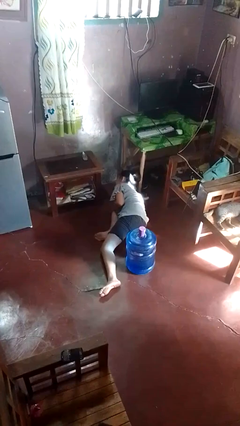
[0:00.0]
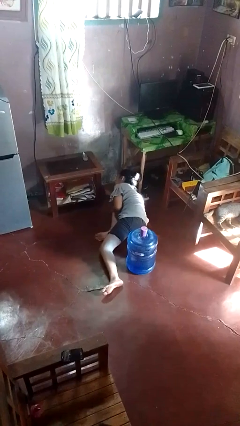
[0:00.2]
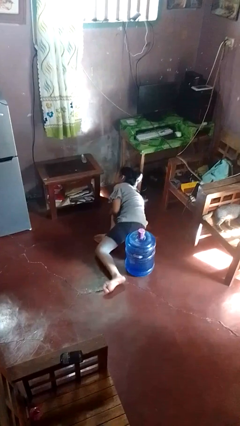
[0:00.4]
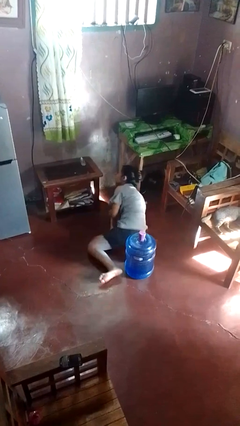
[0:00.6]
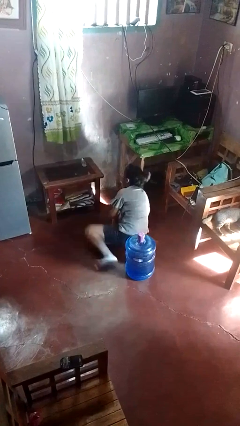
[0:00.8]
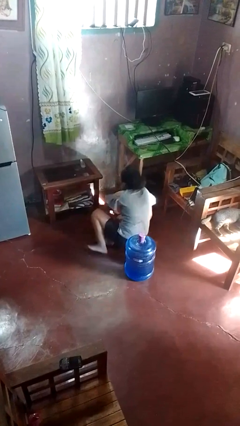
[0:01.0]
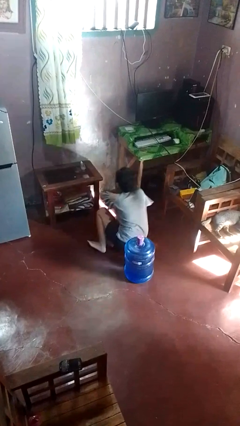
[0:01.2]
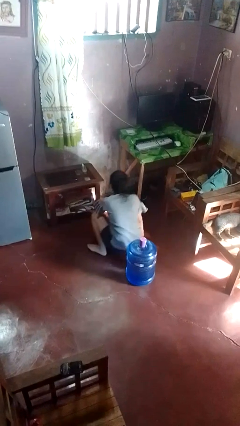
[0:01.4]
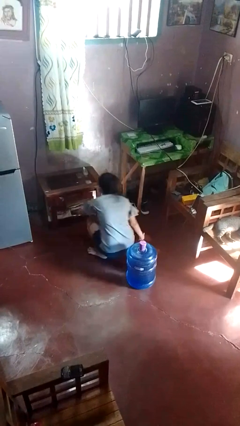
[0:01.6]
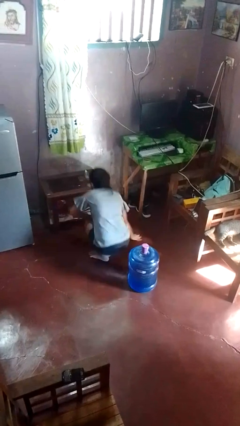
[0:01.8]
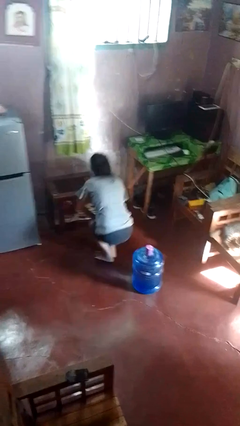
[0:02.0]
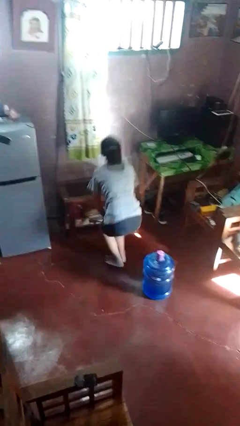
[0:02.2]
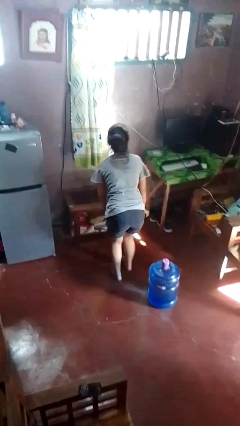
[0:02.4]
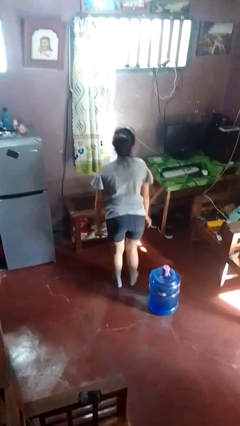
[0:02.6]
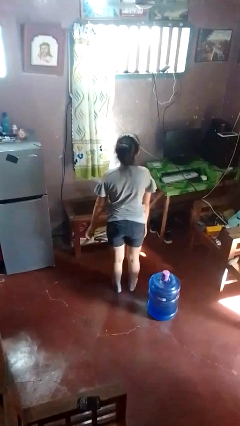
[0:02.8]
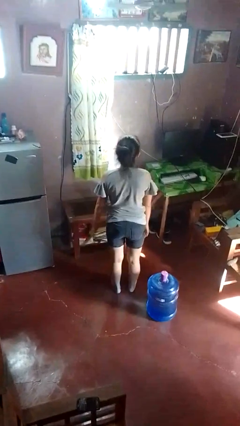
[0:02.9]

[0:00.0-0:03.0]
person stands up from floor

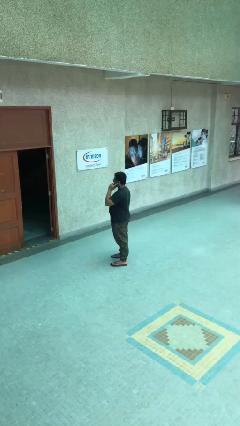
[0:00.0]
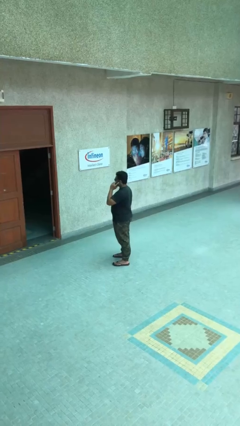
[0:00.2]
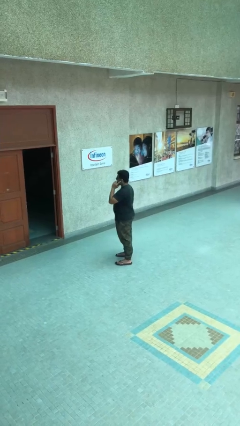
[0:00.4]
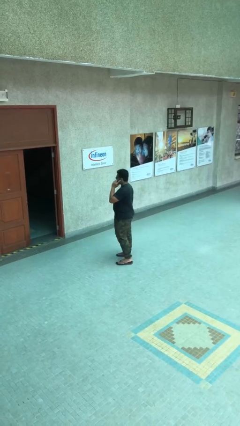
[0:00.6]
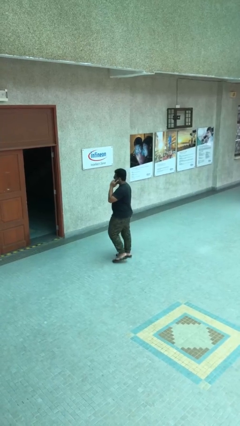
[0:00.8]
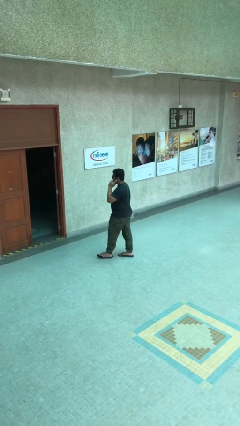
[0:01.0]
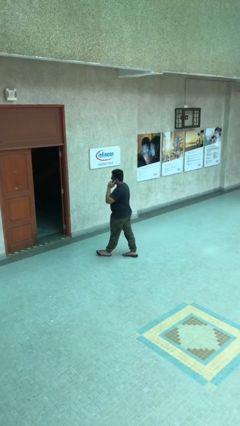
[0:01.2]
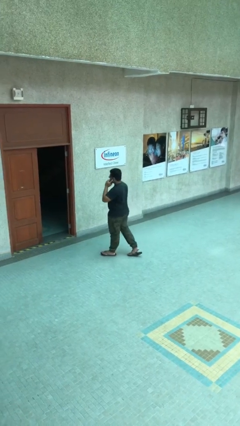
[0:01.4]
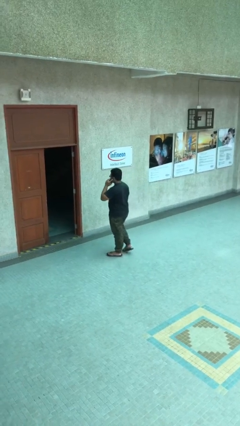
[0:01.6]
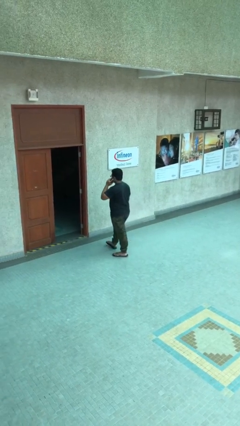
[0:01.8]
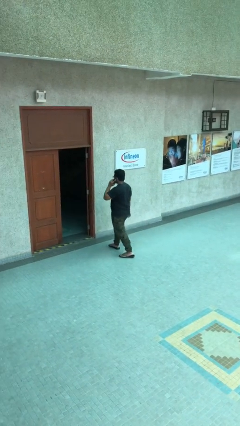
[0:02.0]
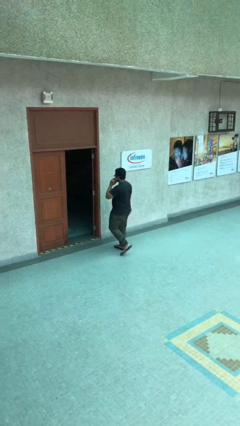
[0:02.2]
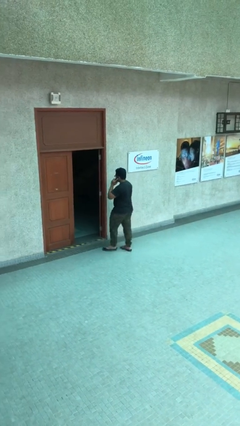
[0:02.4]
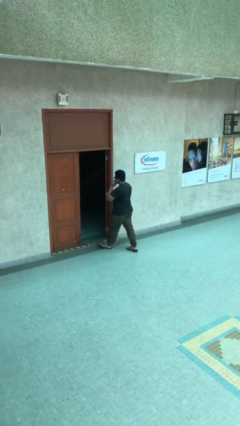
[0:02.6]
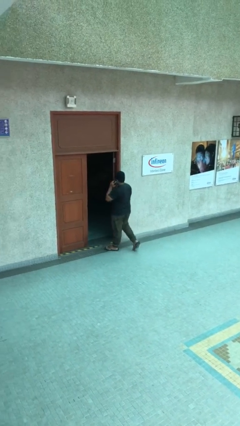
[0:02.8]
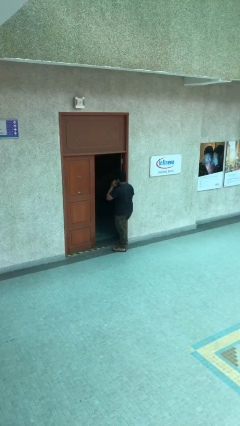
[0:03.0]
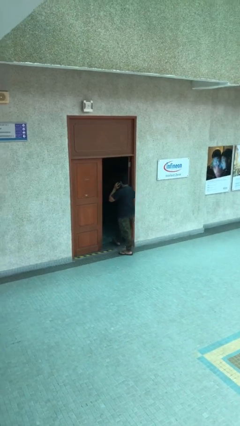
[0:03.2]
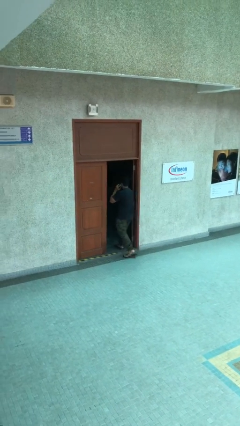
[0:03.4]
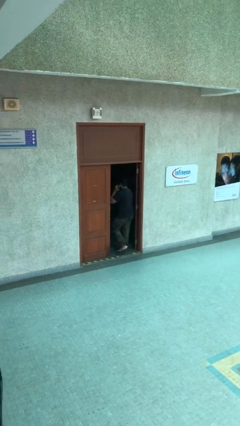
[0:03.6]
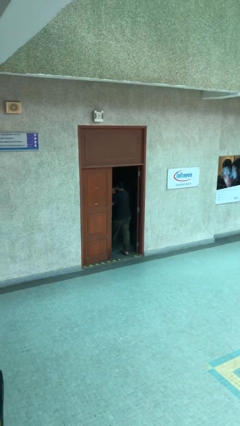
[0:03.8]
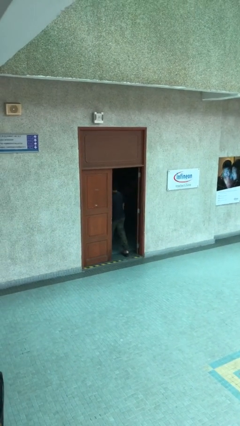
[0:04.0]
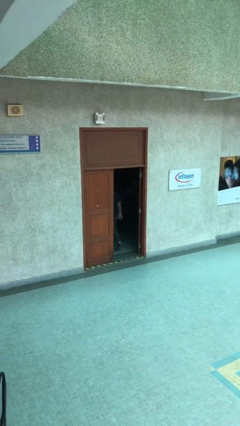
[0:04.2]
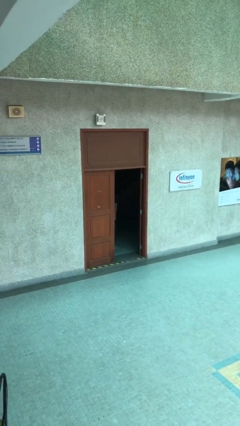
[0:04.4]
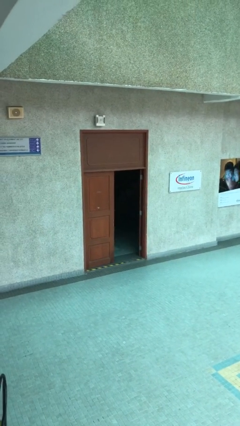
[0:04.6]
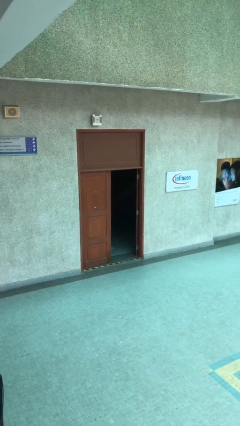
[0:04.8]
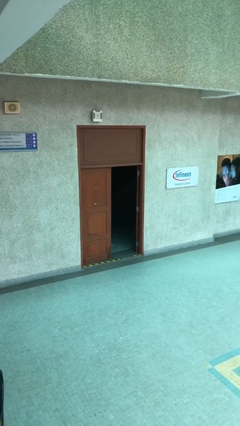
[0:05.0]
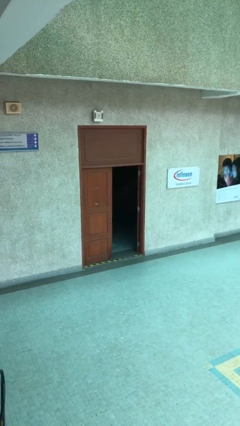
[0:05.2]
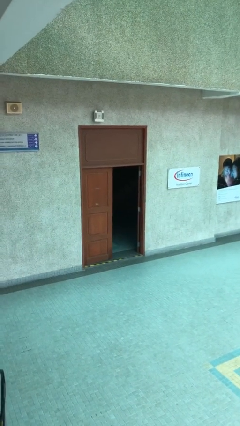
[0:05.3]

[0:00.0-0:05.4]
person exits scene through structure

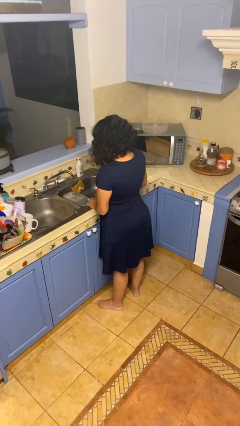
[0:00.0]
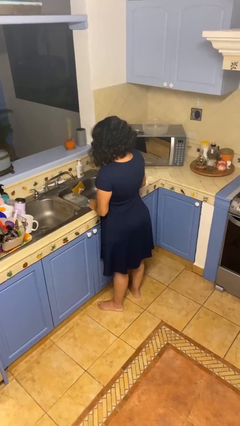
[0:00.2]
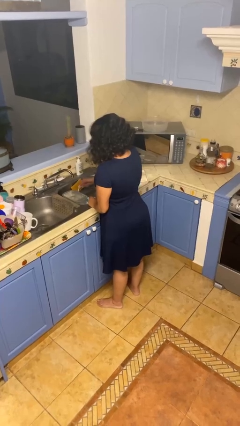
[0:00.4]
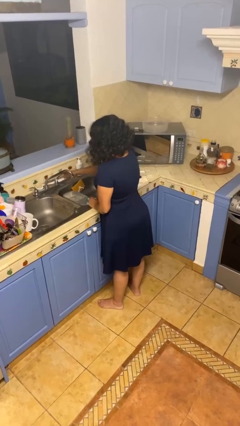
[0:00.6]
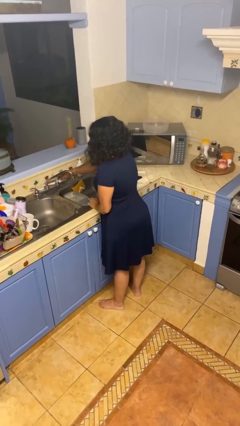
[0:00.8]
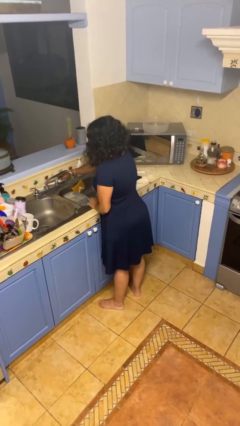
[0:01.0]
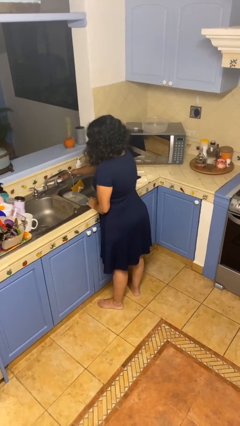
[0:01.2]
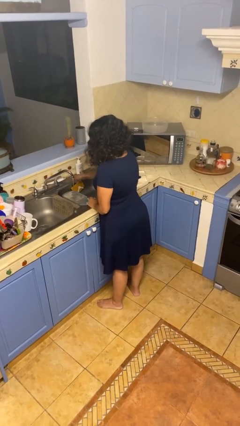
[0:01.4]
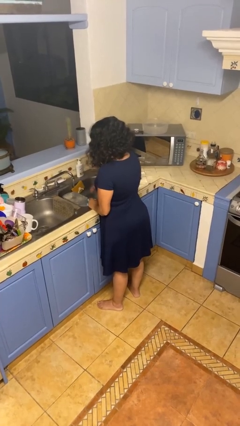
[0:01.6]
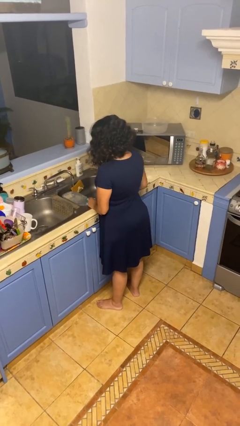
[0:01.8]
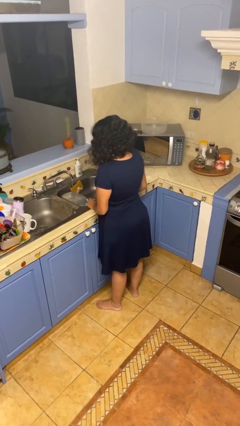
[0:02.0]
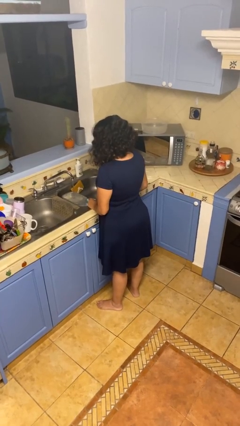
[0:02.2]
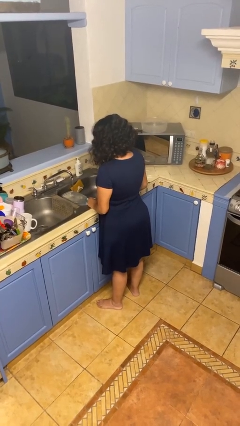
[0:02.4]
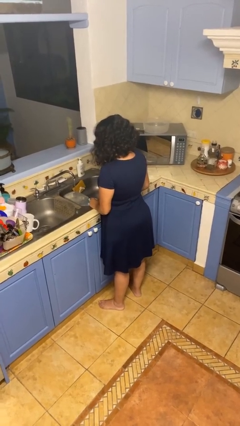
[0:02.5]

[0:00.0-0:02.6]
person turns on faucet

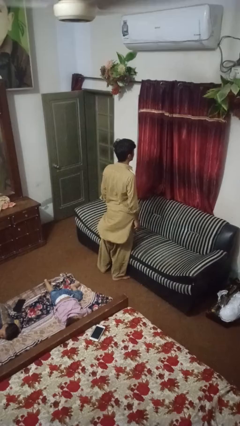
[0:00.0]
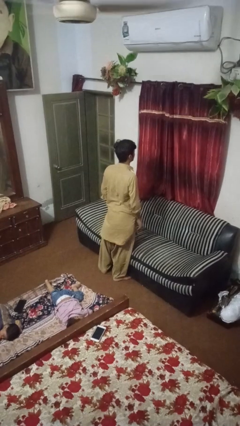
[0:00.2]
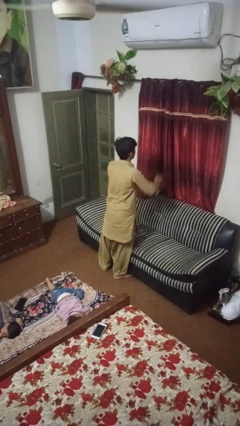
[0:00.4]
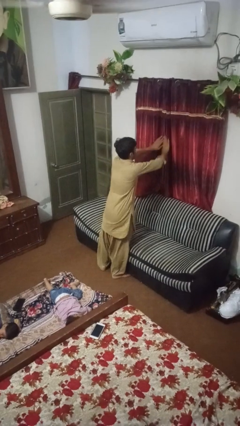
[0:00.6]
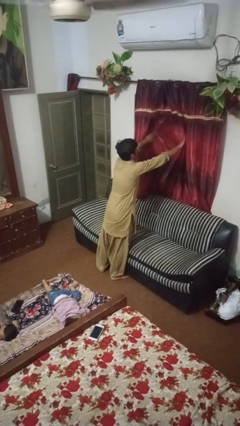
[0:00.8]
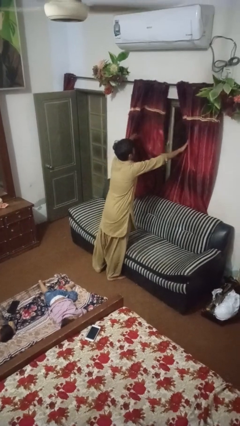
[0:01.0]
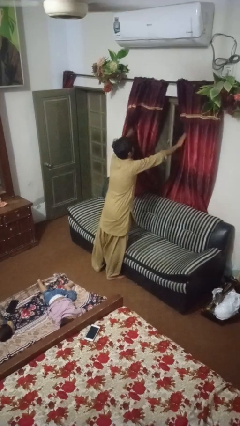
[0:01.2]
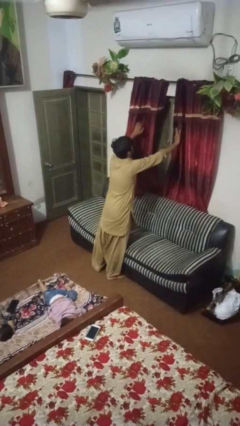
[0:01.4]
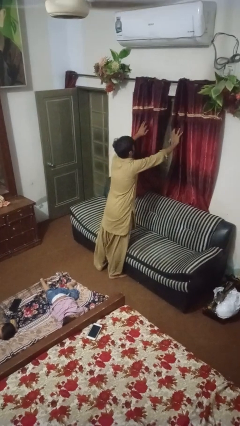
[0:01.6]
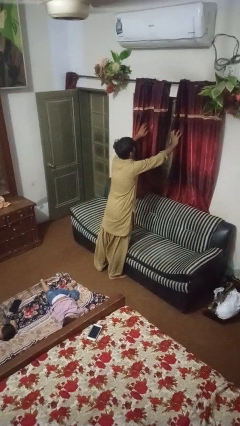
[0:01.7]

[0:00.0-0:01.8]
person opens curtains

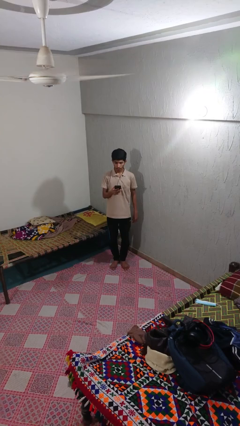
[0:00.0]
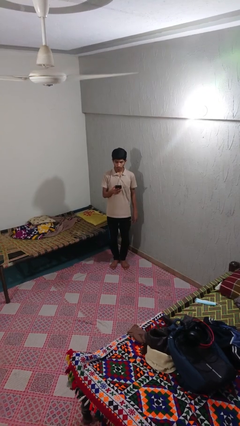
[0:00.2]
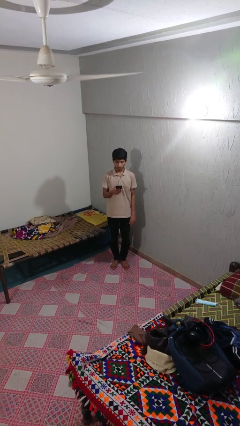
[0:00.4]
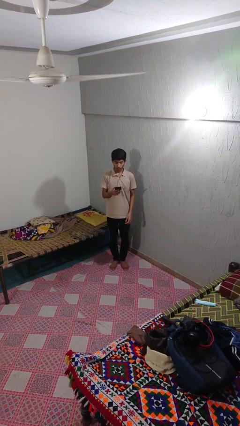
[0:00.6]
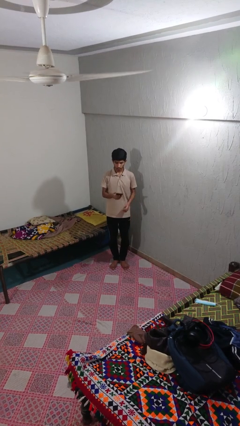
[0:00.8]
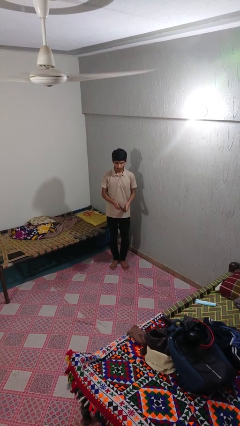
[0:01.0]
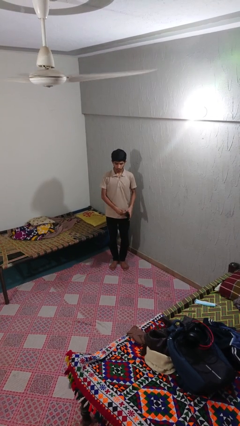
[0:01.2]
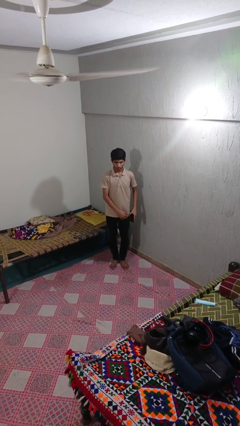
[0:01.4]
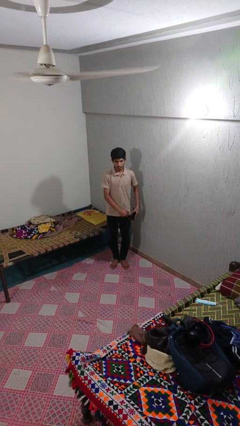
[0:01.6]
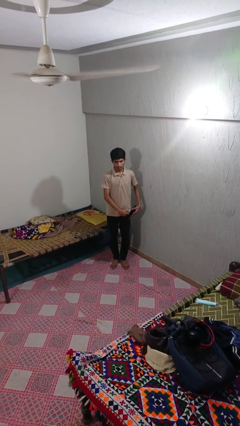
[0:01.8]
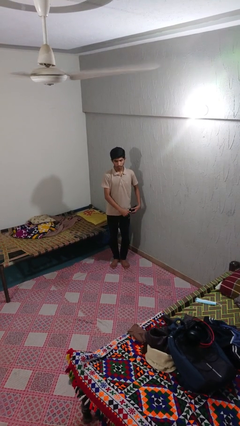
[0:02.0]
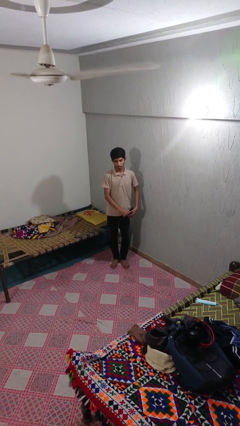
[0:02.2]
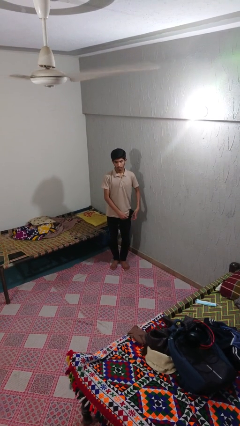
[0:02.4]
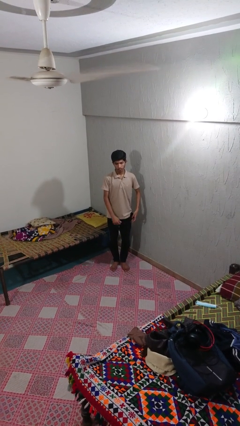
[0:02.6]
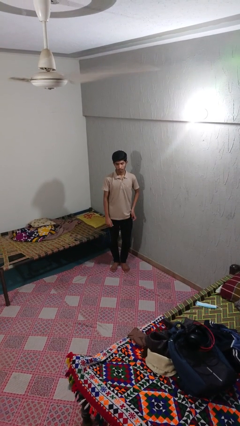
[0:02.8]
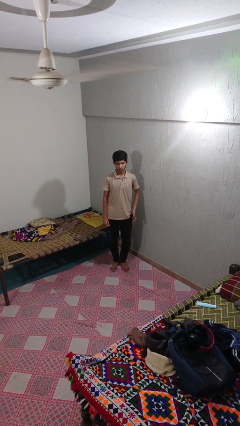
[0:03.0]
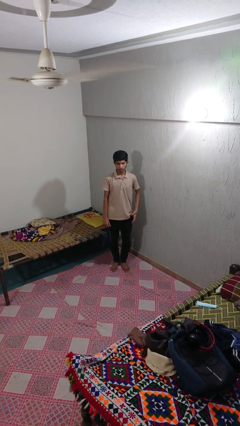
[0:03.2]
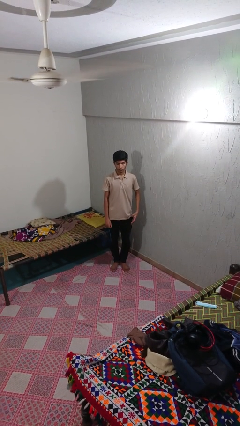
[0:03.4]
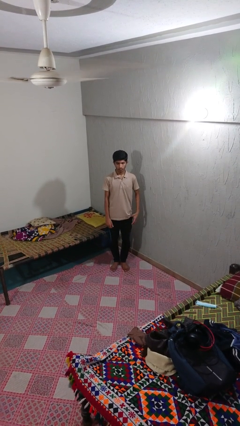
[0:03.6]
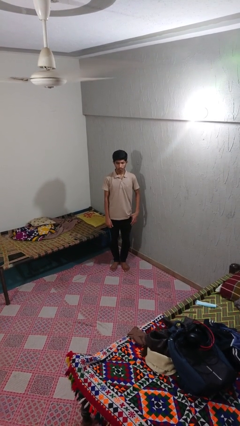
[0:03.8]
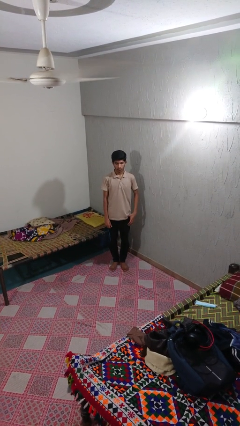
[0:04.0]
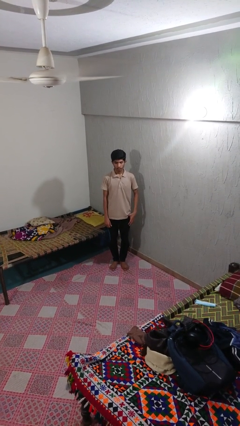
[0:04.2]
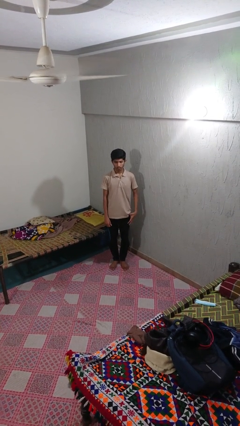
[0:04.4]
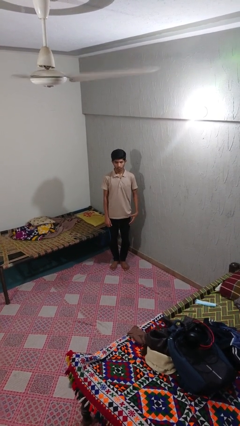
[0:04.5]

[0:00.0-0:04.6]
person puts phone into pocket
